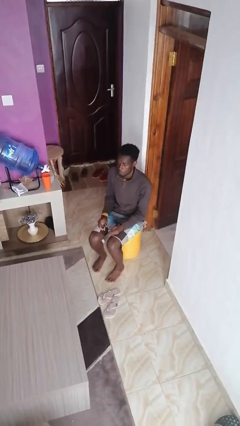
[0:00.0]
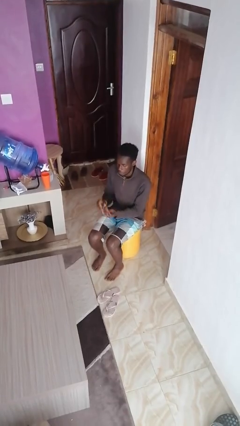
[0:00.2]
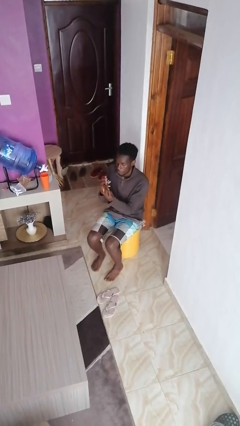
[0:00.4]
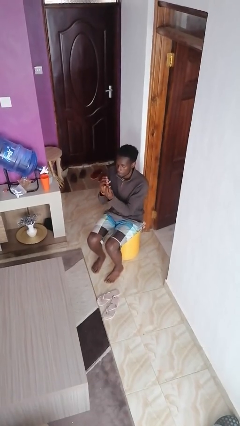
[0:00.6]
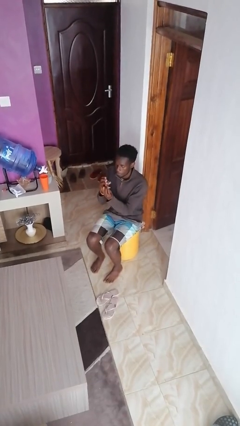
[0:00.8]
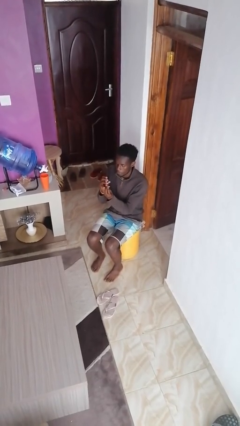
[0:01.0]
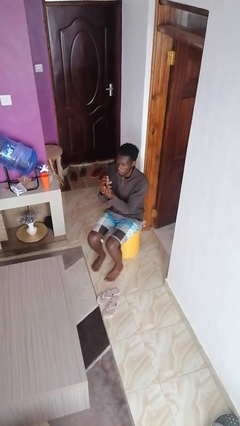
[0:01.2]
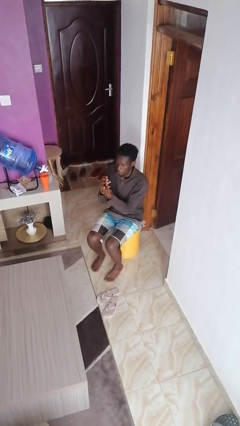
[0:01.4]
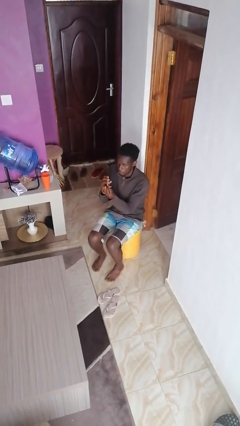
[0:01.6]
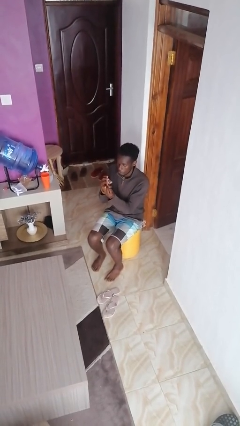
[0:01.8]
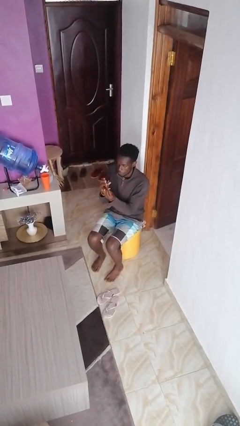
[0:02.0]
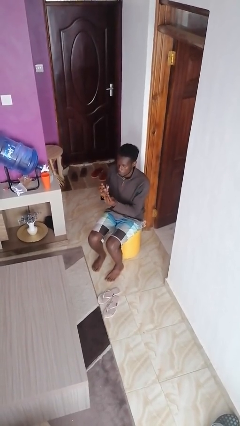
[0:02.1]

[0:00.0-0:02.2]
person clips fingernails

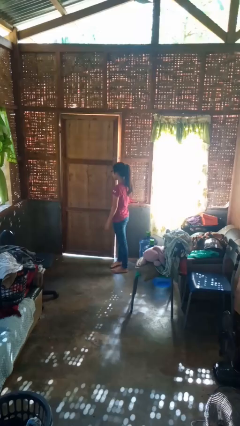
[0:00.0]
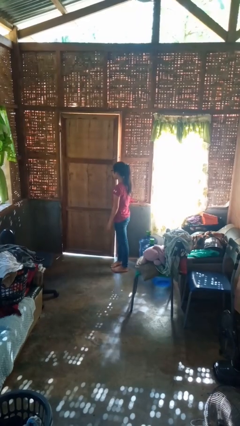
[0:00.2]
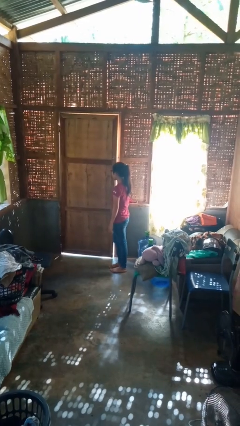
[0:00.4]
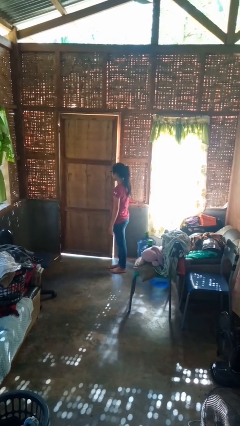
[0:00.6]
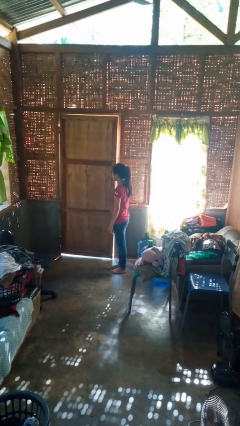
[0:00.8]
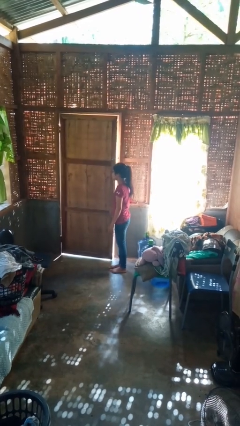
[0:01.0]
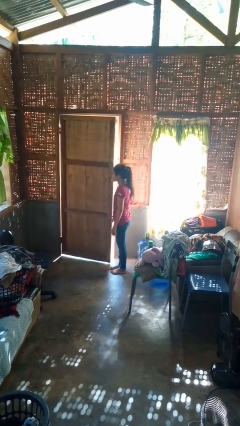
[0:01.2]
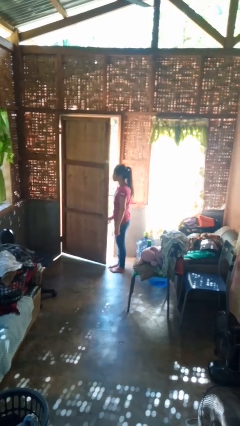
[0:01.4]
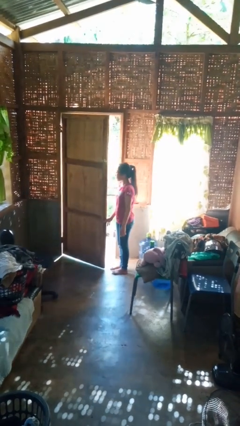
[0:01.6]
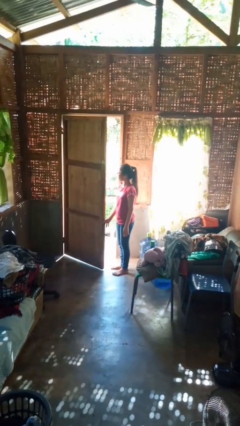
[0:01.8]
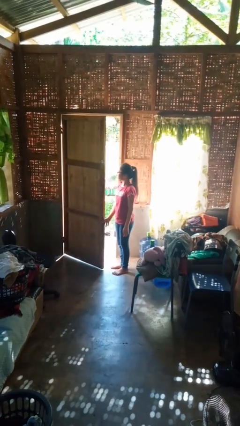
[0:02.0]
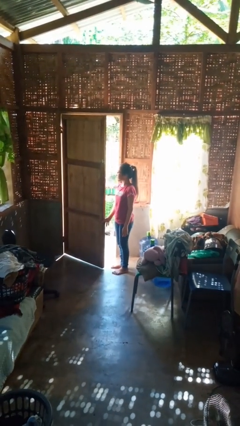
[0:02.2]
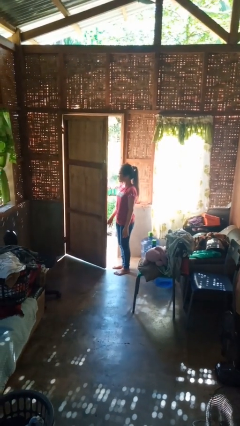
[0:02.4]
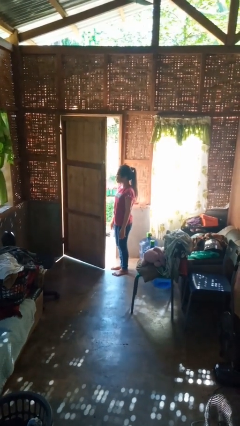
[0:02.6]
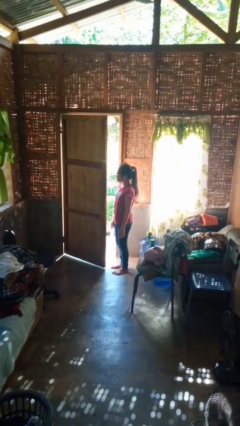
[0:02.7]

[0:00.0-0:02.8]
person opens facility door

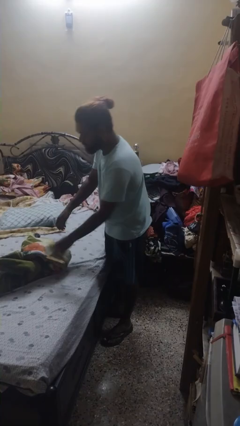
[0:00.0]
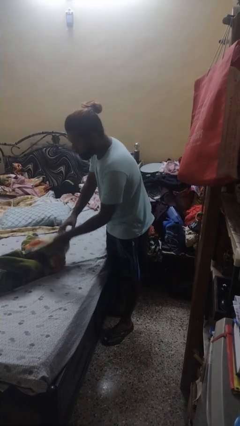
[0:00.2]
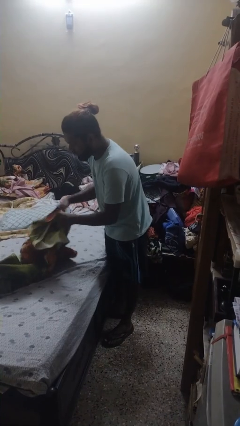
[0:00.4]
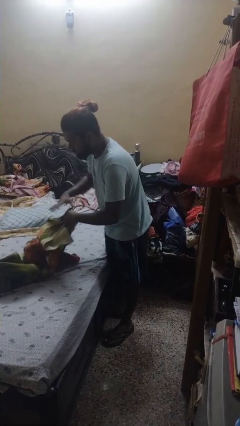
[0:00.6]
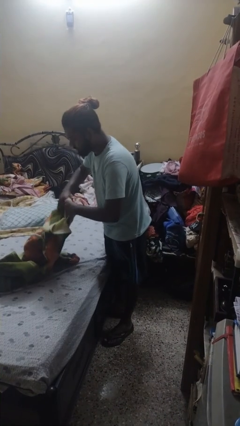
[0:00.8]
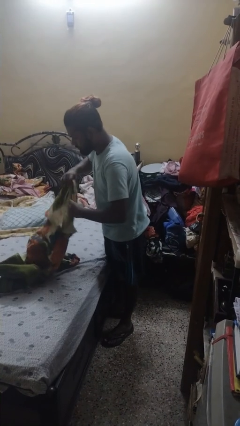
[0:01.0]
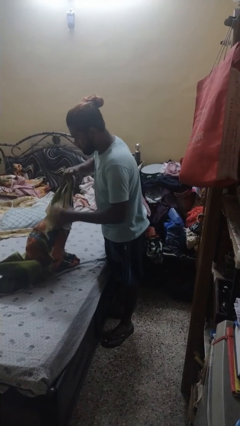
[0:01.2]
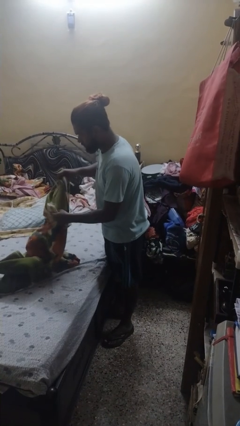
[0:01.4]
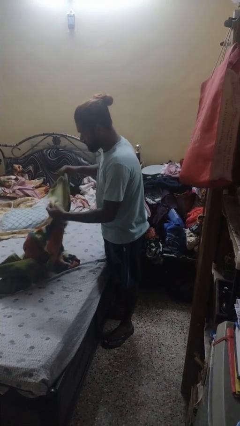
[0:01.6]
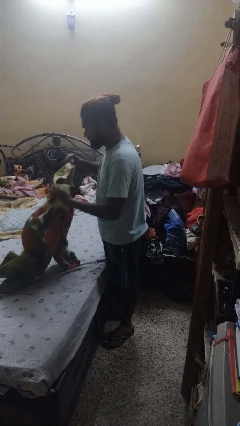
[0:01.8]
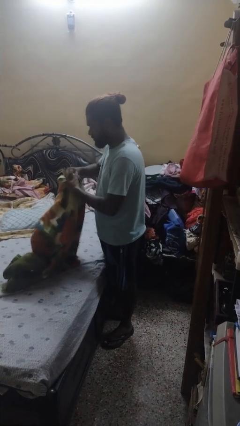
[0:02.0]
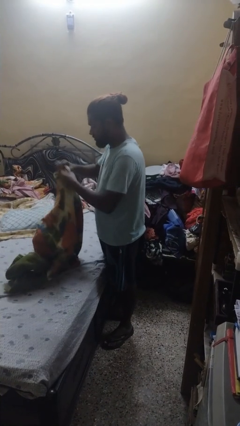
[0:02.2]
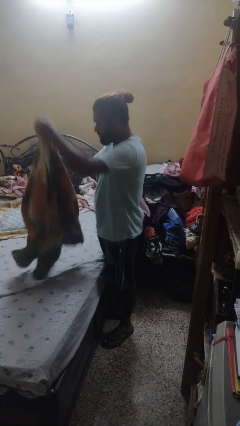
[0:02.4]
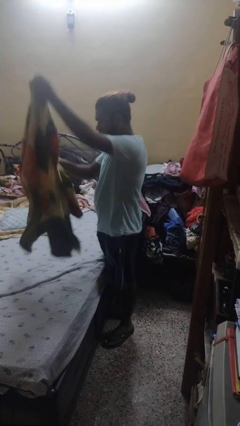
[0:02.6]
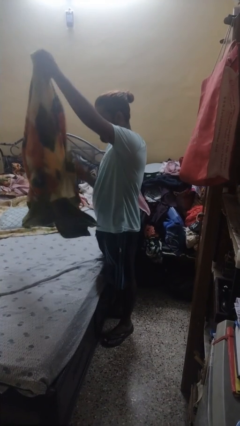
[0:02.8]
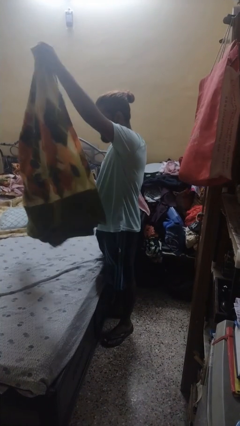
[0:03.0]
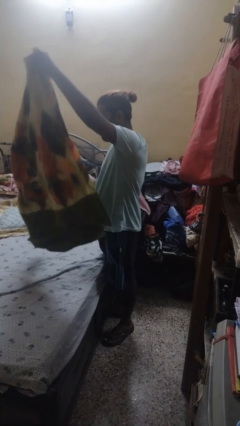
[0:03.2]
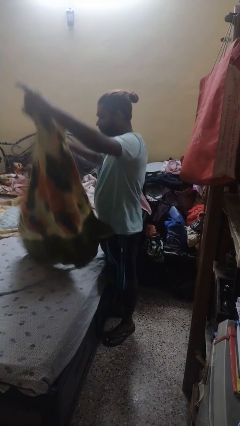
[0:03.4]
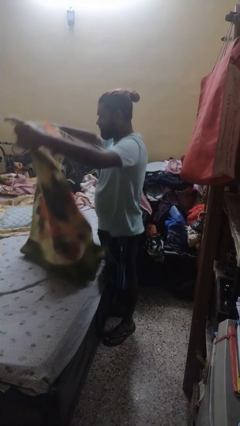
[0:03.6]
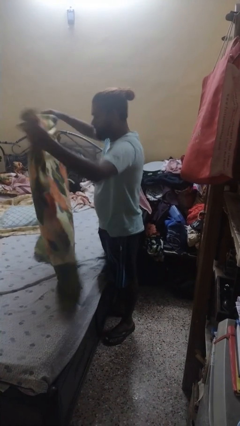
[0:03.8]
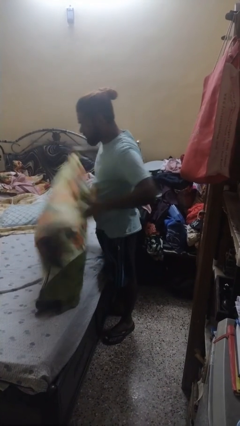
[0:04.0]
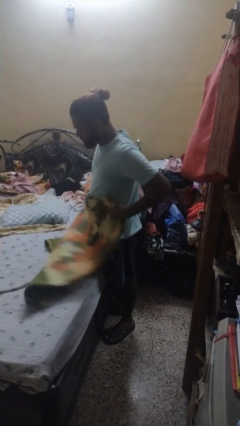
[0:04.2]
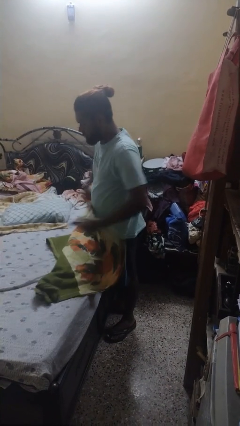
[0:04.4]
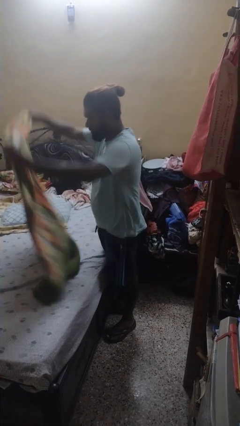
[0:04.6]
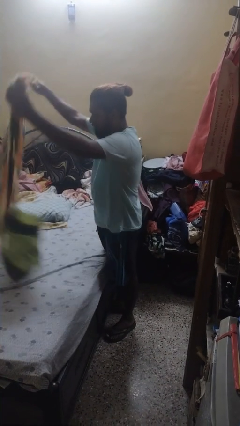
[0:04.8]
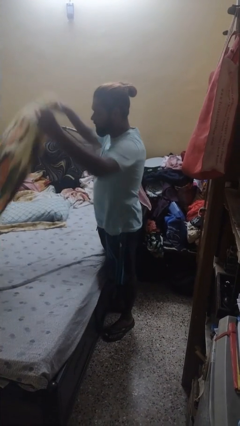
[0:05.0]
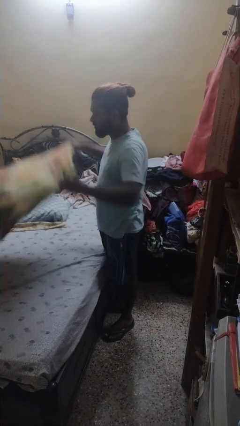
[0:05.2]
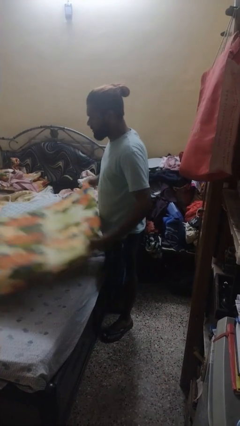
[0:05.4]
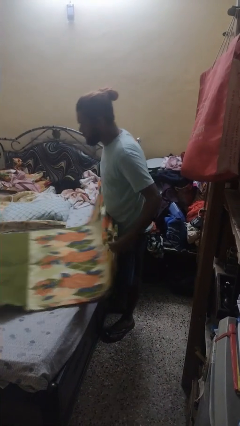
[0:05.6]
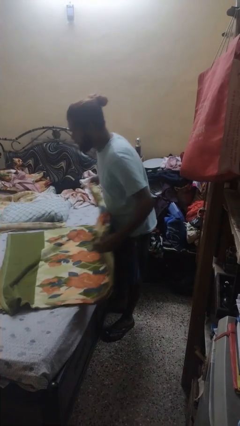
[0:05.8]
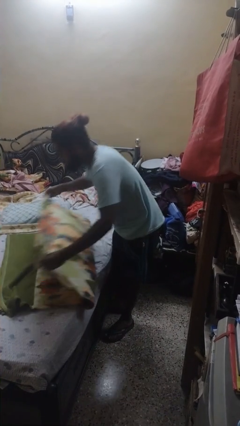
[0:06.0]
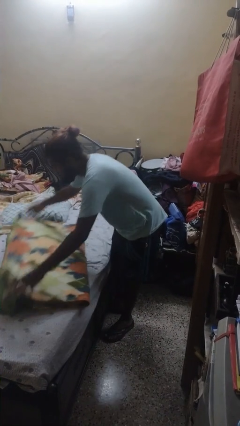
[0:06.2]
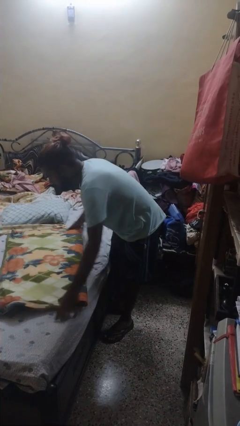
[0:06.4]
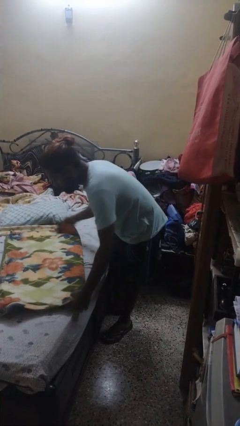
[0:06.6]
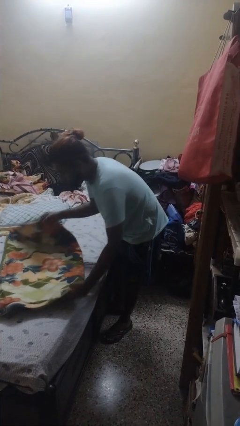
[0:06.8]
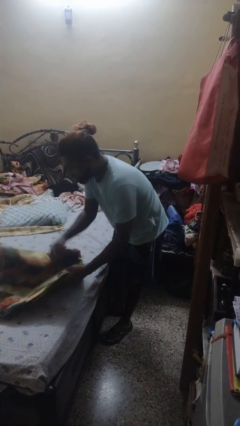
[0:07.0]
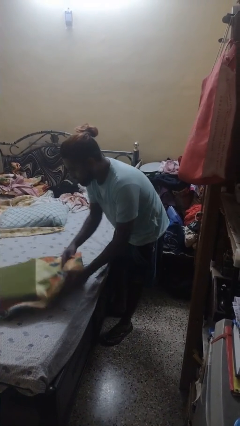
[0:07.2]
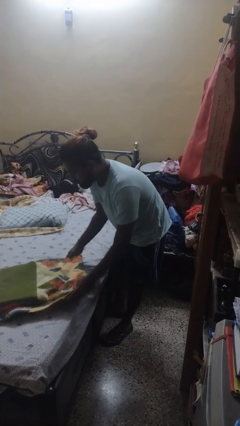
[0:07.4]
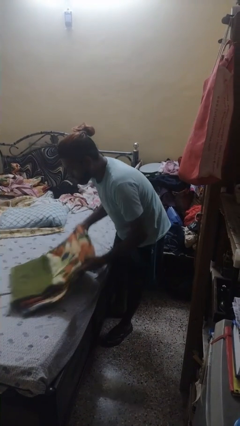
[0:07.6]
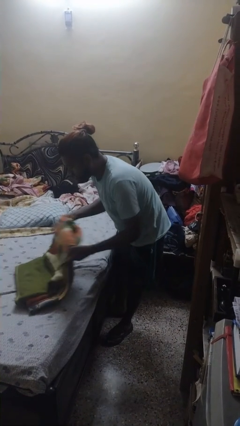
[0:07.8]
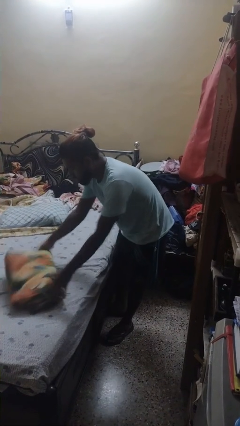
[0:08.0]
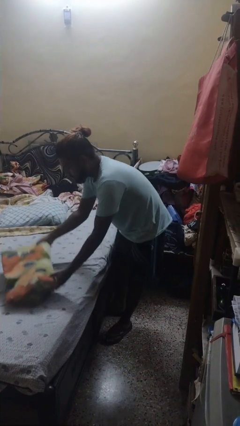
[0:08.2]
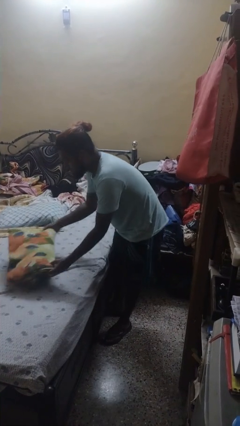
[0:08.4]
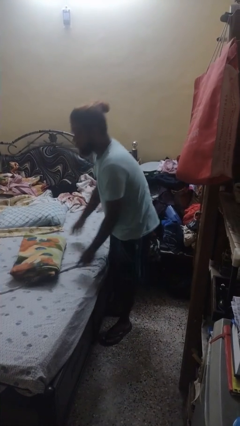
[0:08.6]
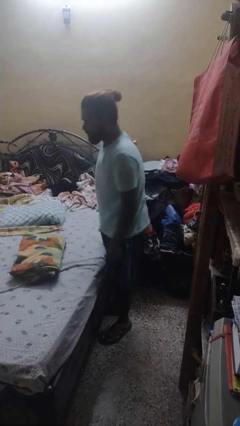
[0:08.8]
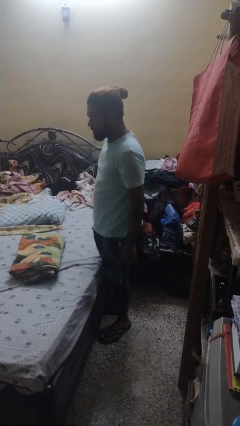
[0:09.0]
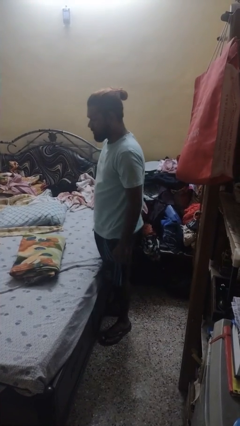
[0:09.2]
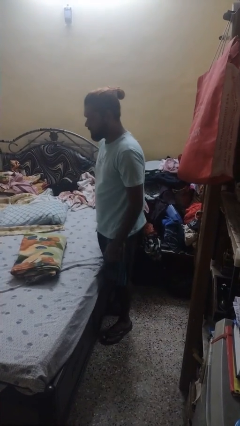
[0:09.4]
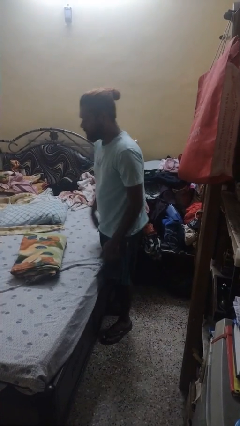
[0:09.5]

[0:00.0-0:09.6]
person folds blanket

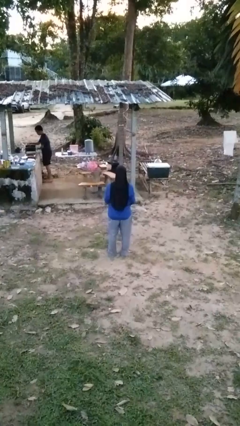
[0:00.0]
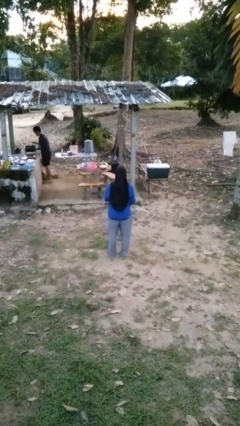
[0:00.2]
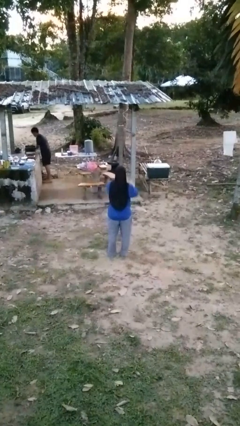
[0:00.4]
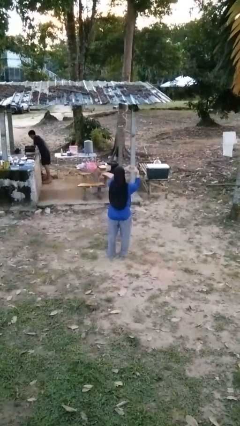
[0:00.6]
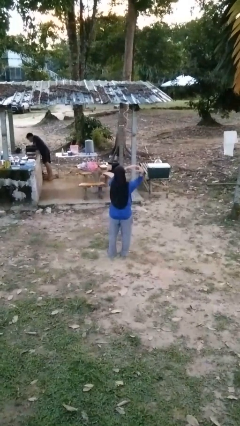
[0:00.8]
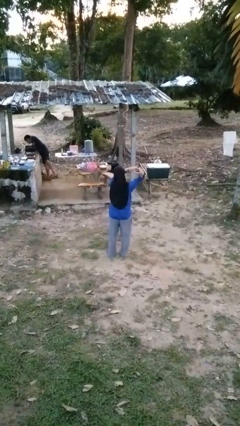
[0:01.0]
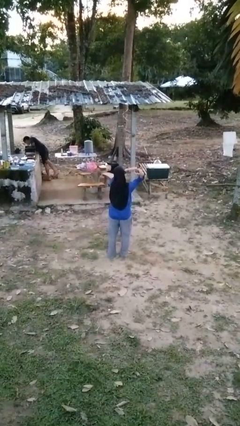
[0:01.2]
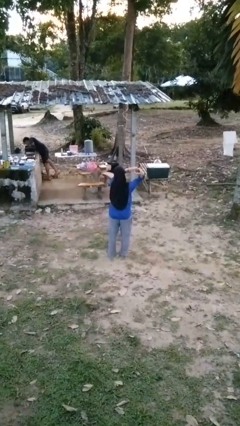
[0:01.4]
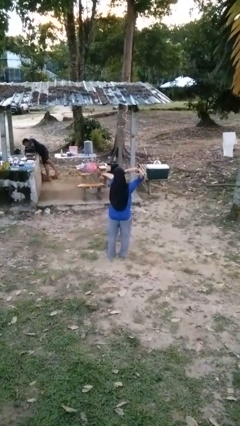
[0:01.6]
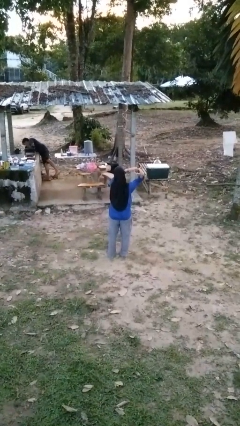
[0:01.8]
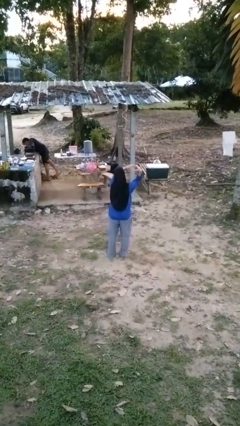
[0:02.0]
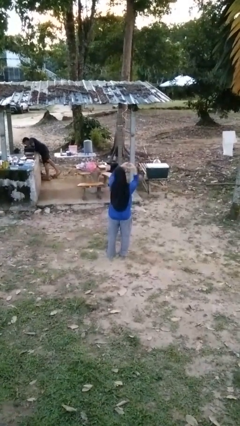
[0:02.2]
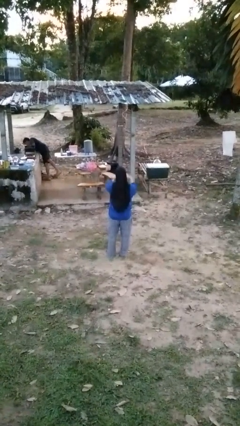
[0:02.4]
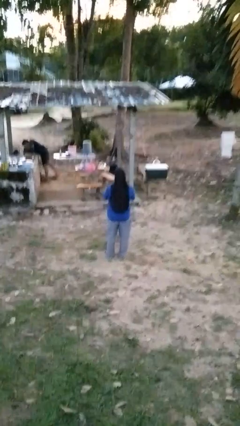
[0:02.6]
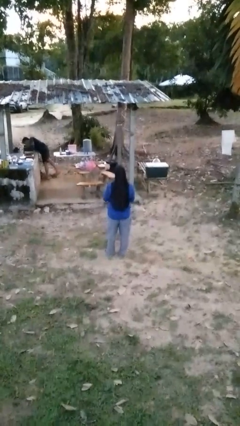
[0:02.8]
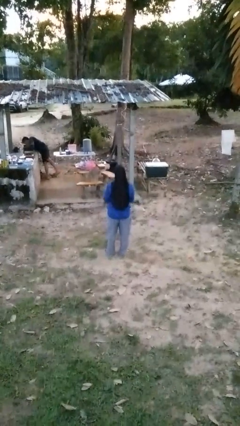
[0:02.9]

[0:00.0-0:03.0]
person gestures heart
